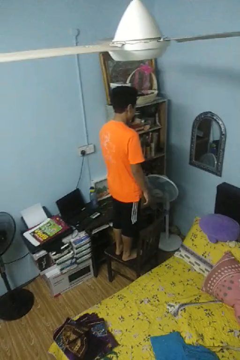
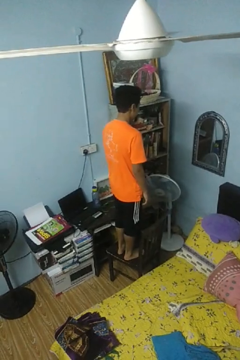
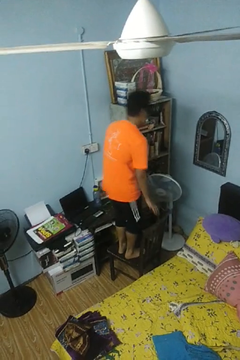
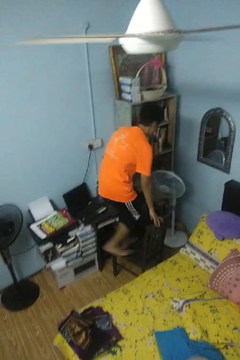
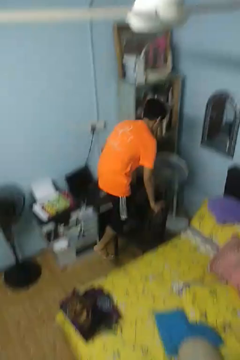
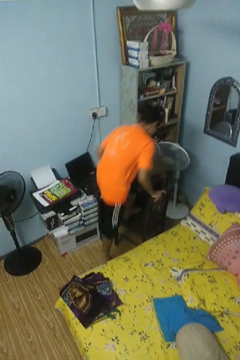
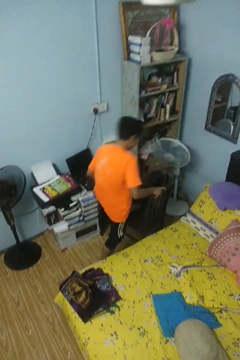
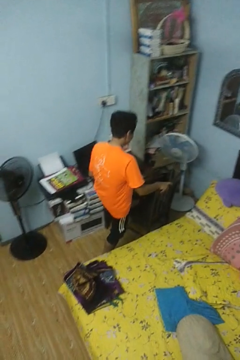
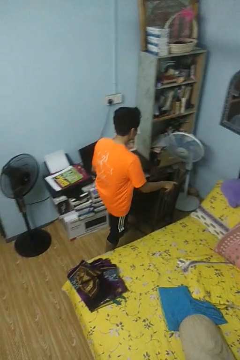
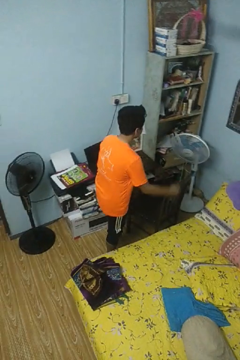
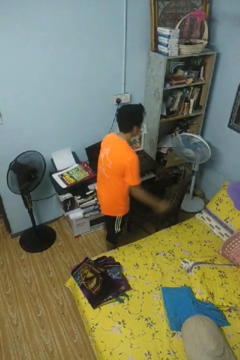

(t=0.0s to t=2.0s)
person climbs off chair

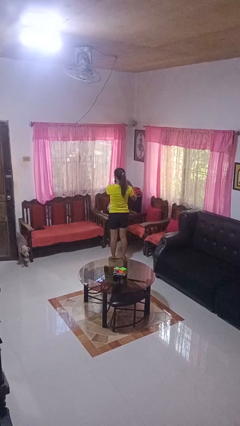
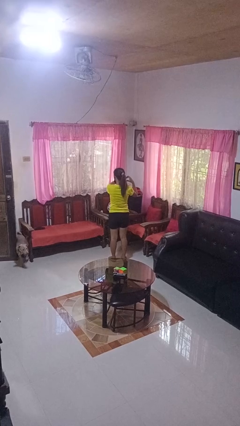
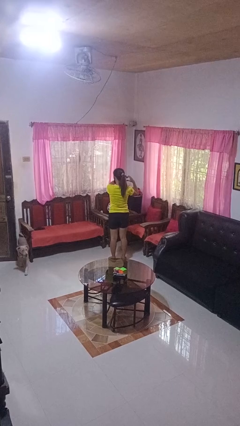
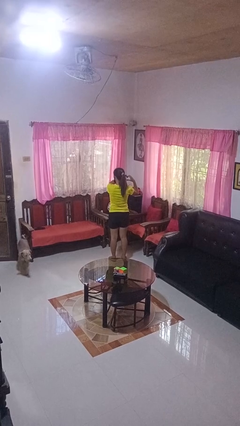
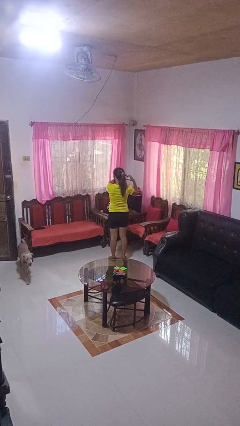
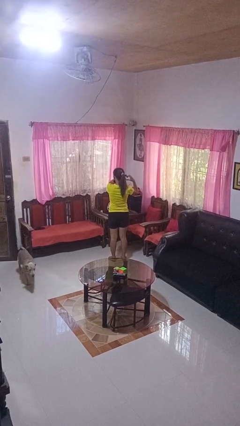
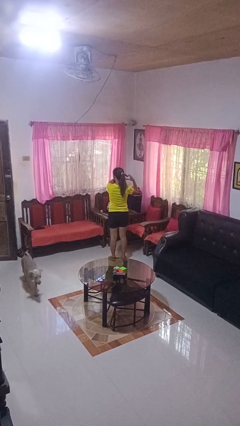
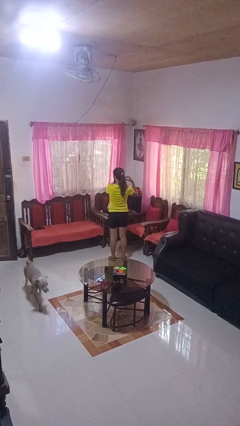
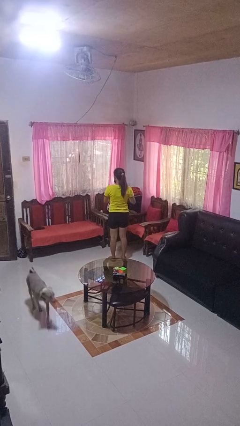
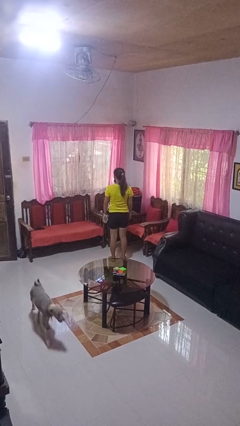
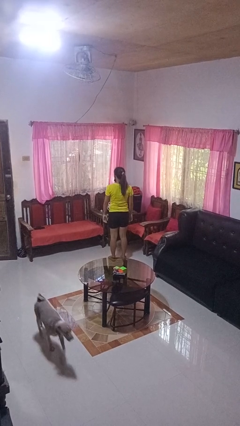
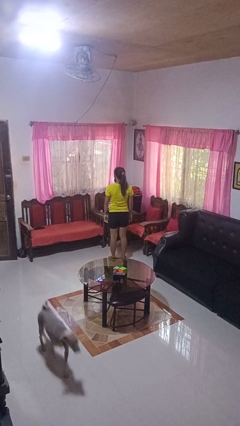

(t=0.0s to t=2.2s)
person gestures heart

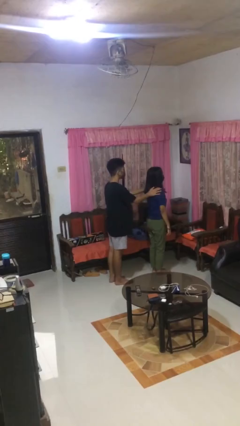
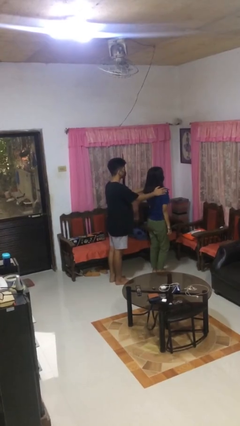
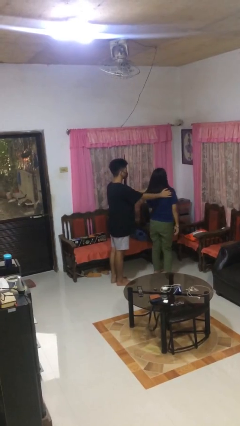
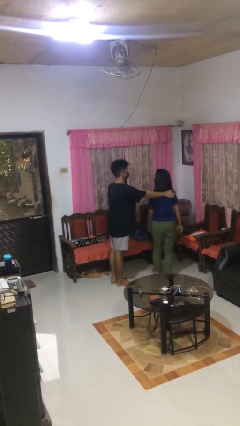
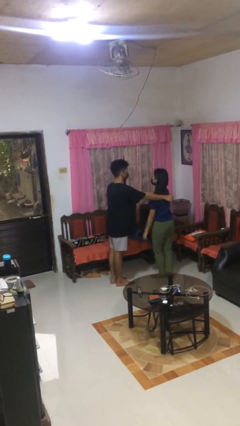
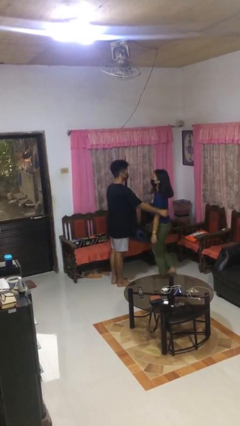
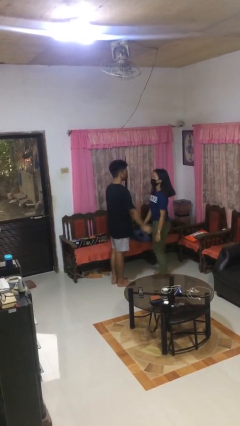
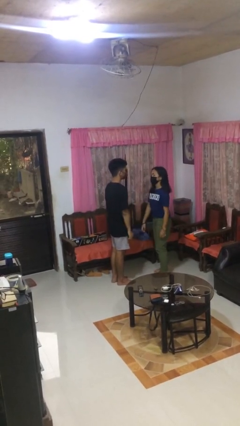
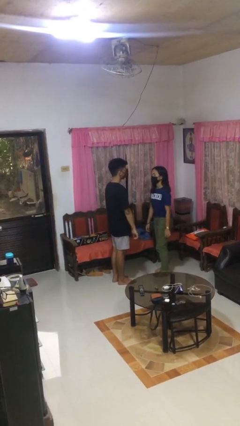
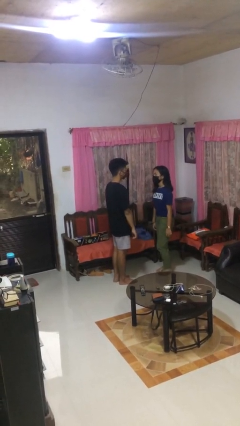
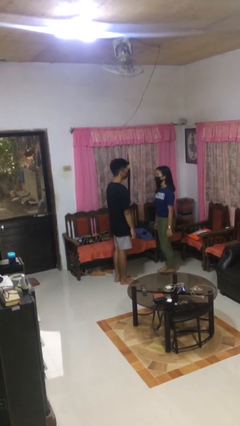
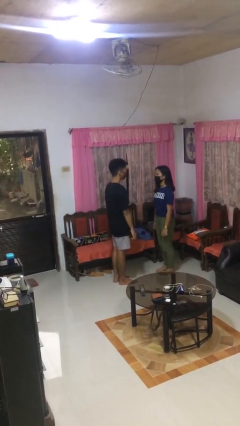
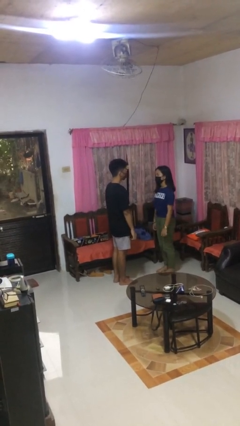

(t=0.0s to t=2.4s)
person spins person around

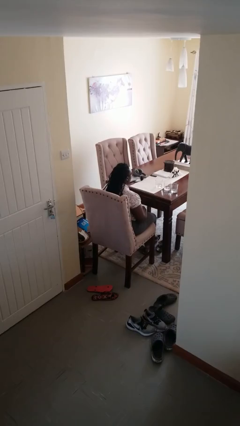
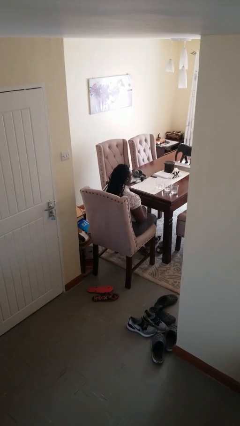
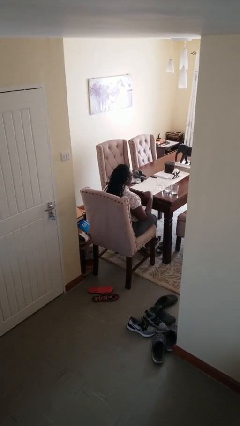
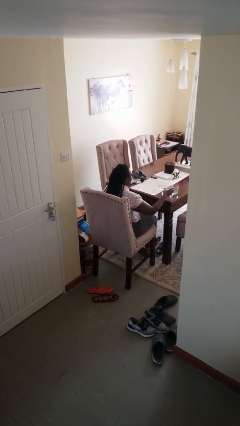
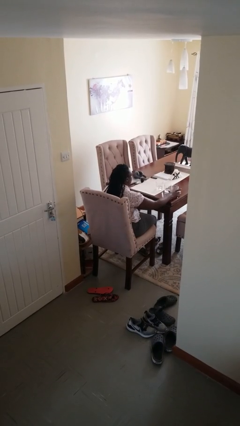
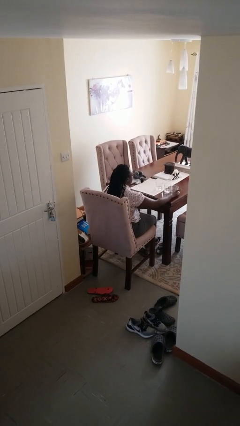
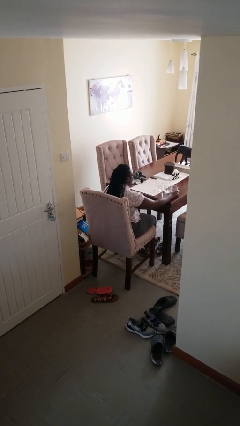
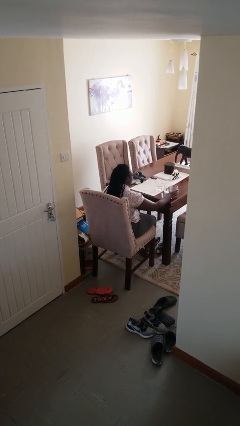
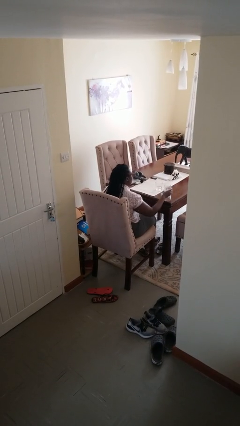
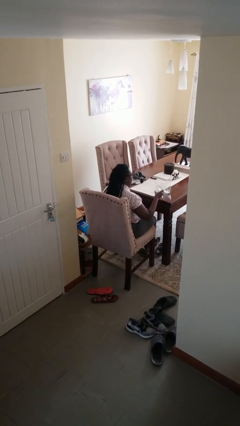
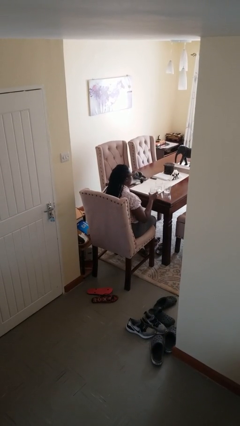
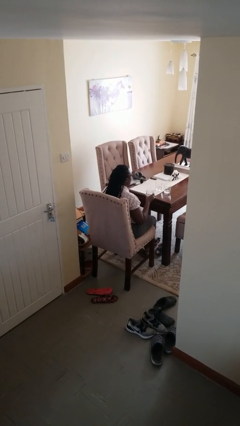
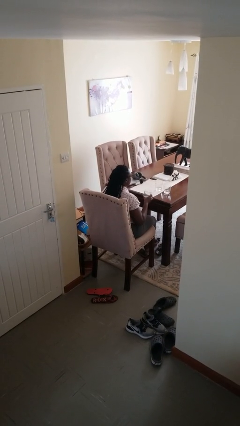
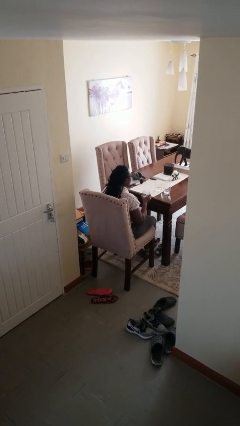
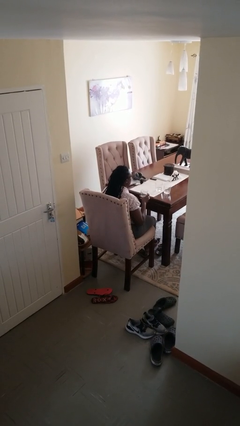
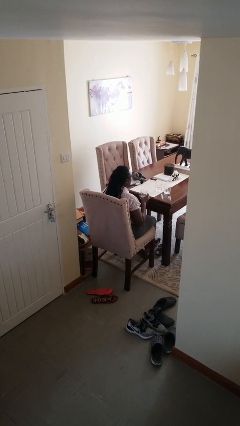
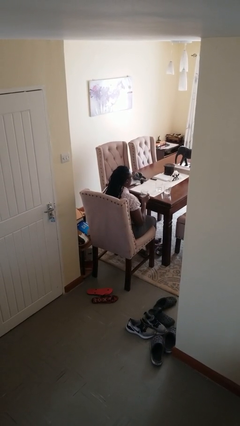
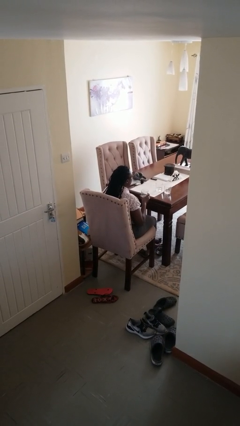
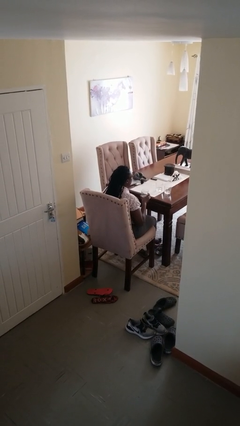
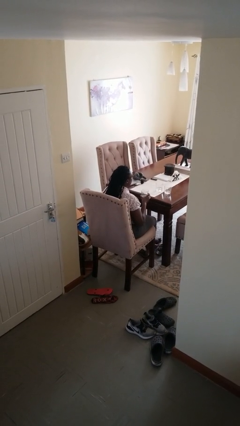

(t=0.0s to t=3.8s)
person picks up object from table

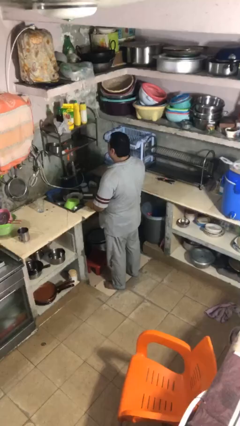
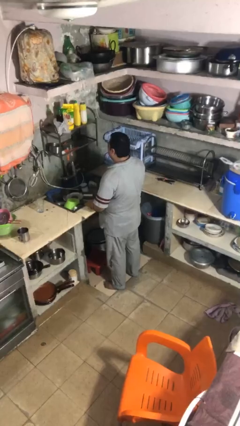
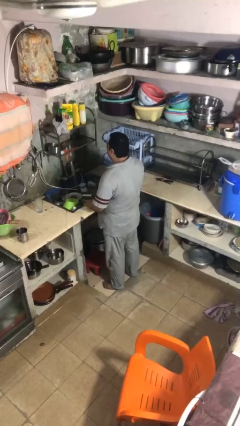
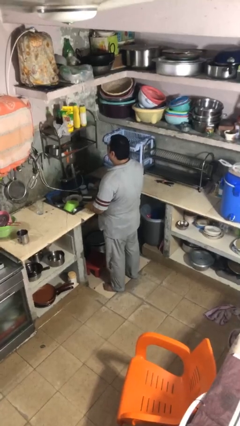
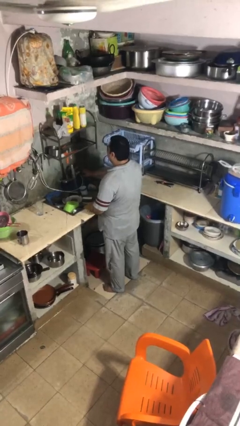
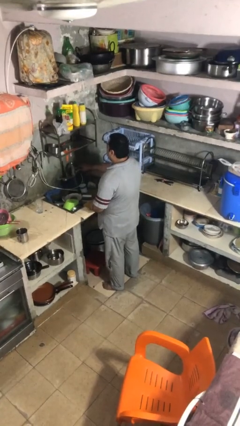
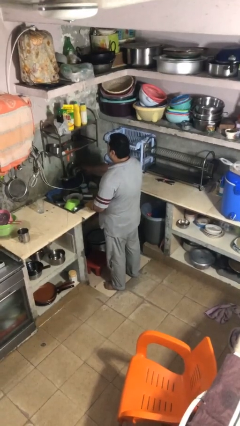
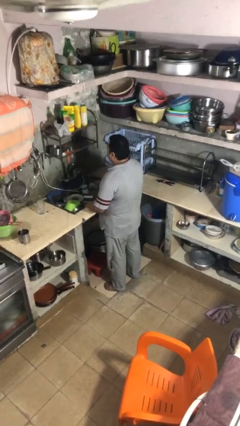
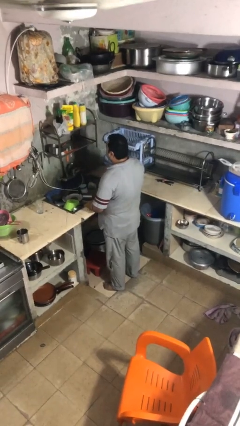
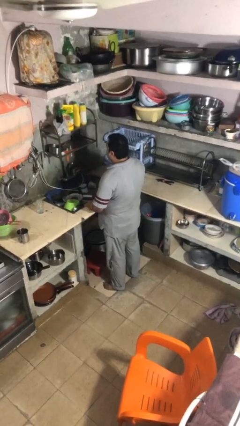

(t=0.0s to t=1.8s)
person turns off faucet

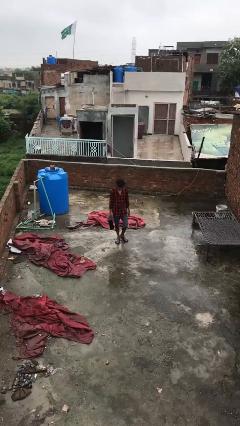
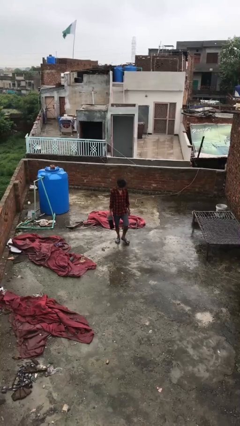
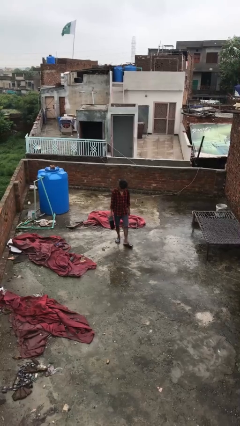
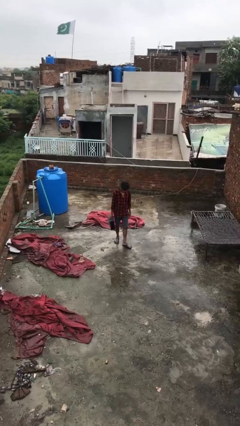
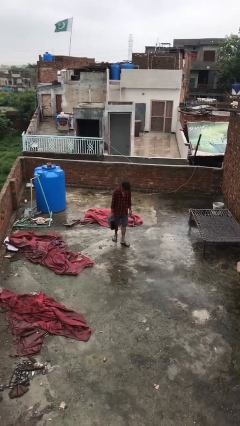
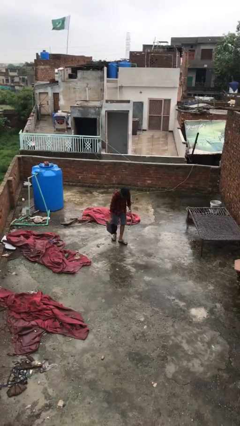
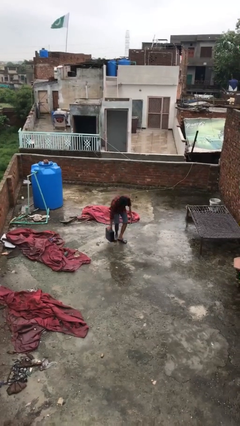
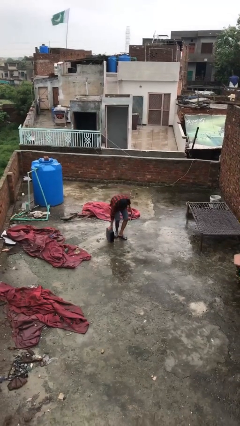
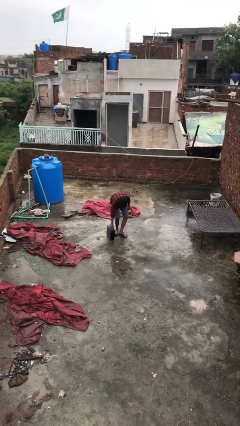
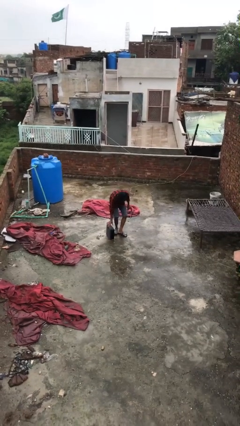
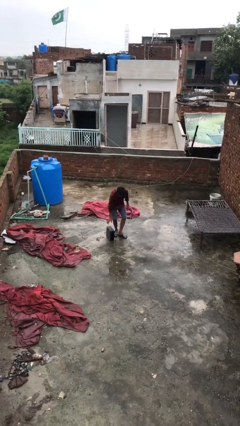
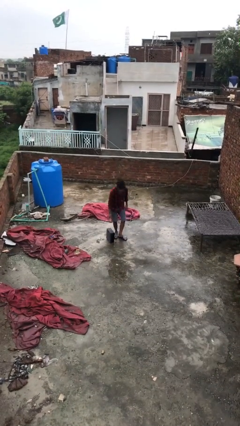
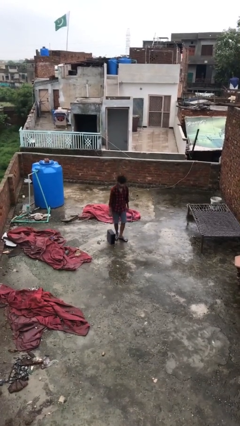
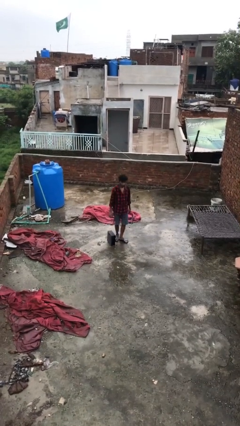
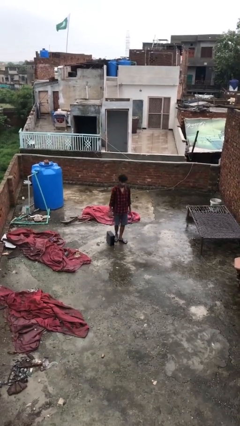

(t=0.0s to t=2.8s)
person puts down object on floor

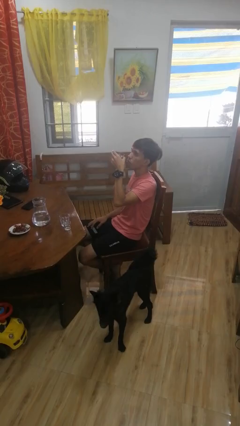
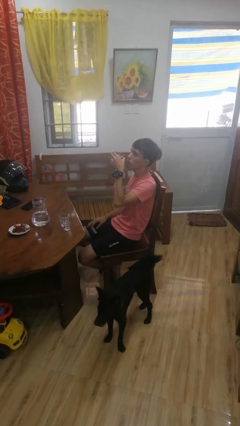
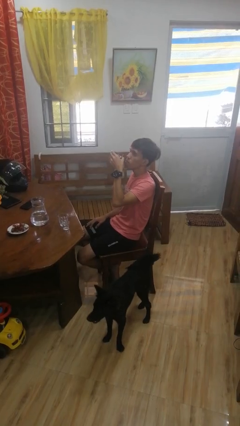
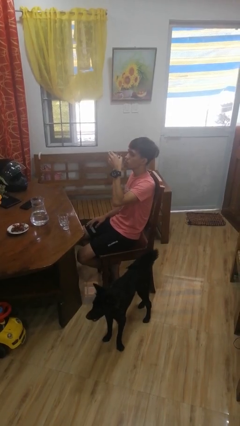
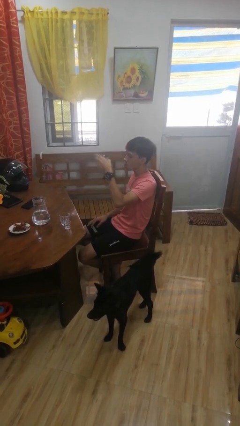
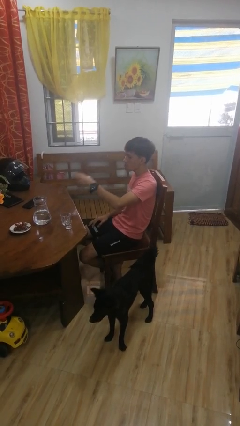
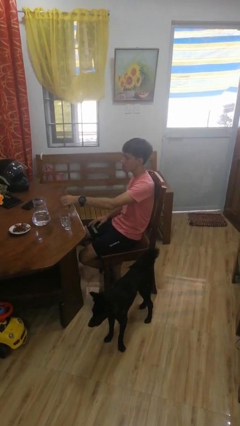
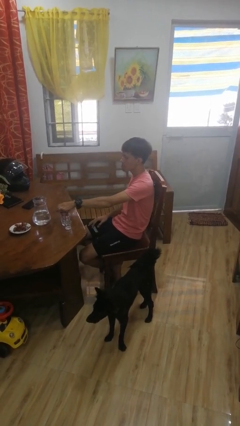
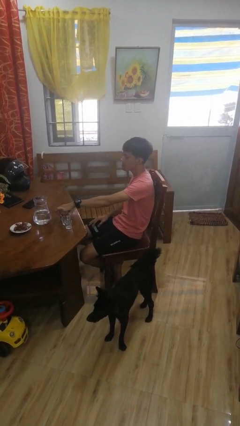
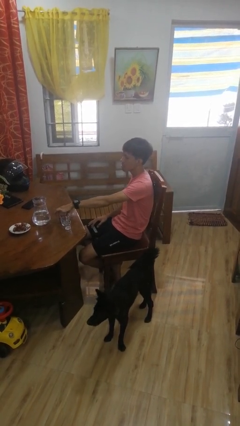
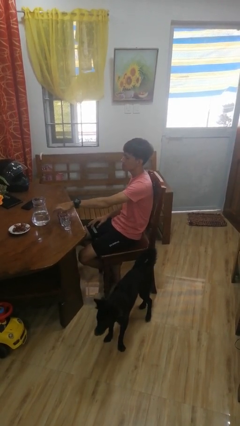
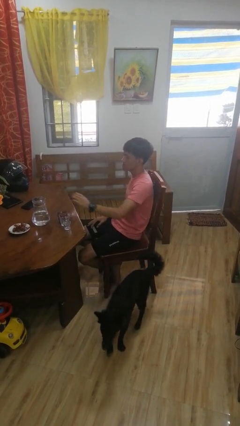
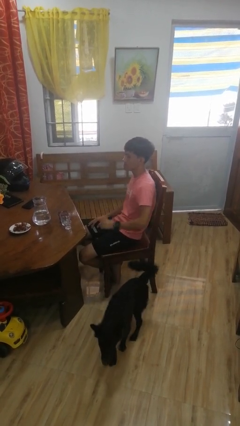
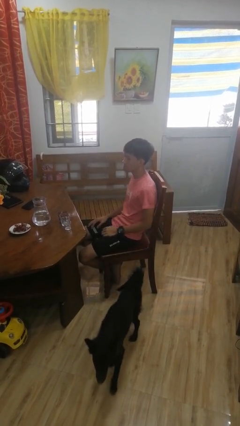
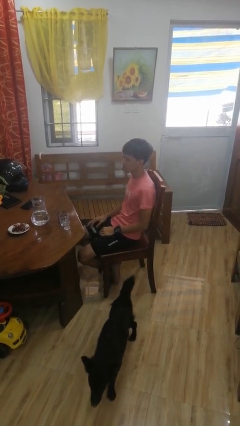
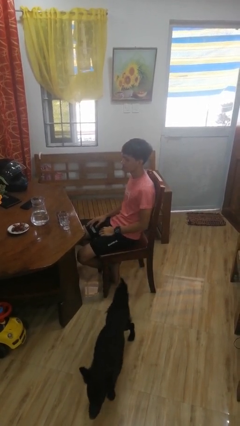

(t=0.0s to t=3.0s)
person puts down object on table
